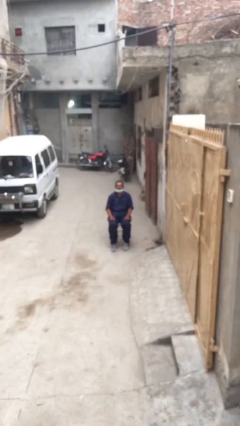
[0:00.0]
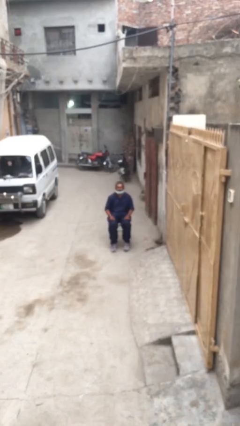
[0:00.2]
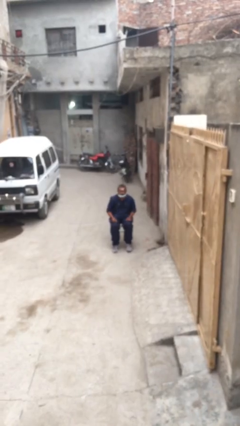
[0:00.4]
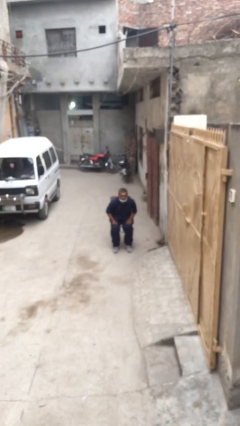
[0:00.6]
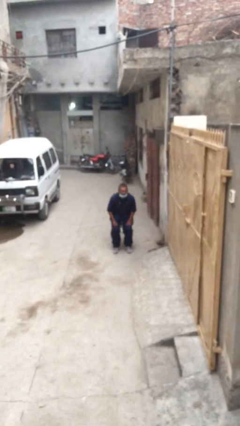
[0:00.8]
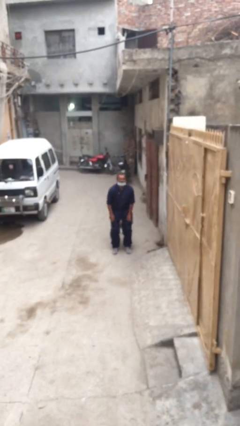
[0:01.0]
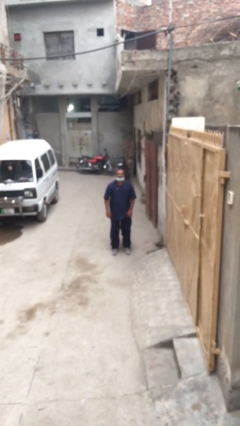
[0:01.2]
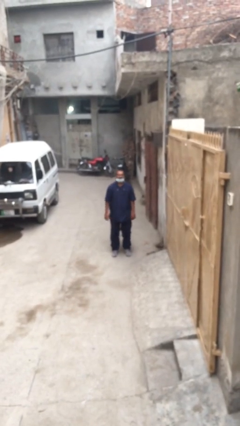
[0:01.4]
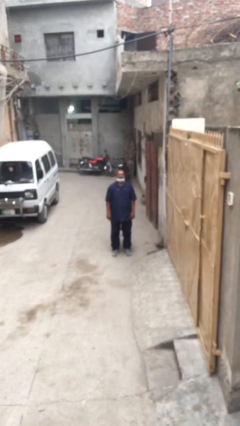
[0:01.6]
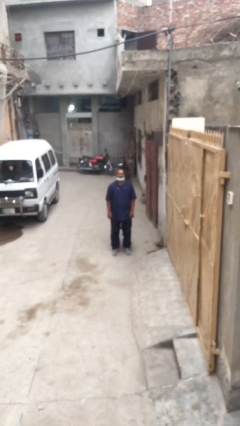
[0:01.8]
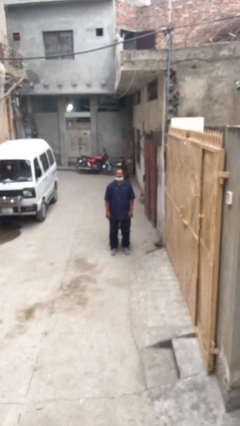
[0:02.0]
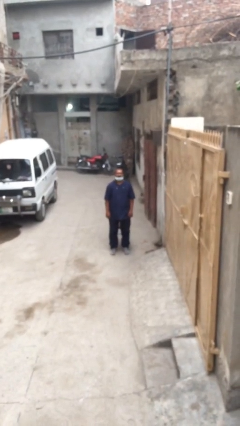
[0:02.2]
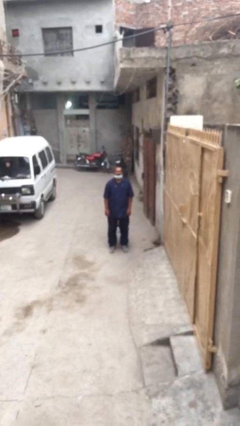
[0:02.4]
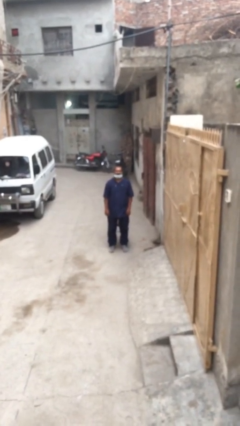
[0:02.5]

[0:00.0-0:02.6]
person stands up

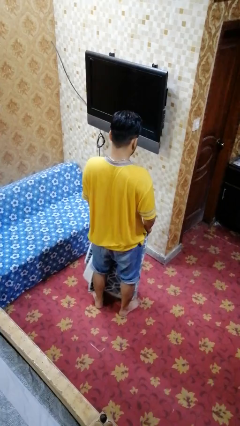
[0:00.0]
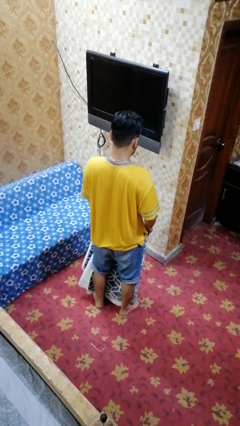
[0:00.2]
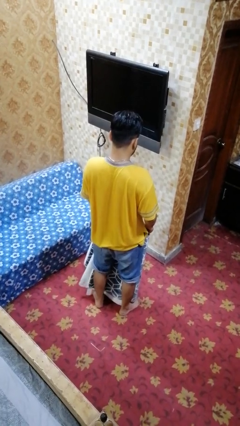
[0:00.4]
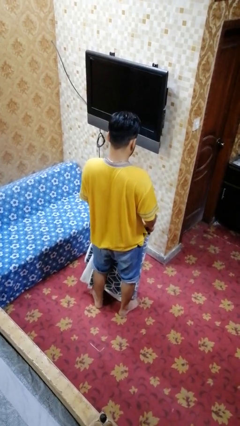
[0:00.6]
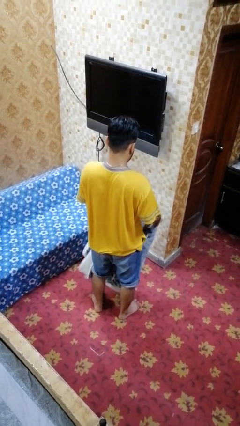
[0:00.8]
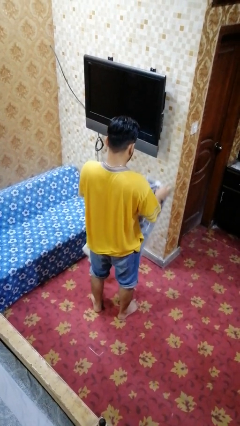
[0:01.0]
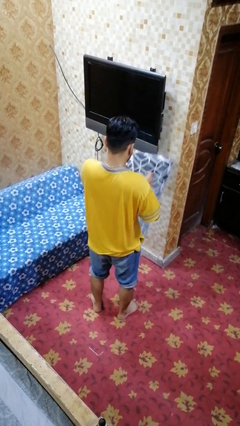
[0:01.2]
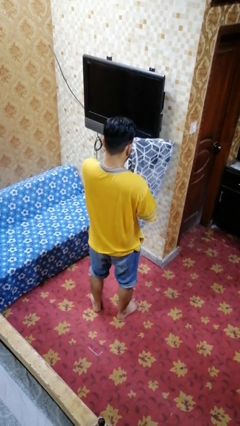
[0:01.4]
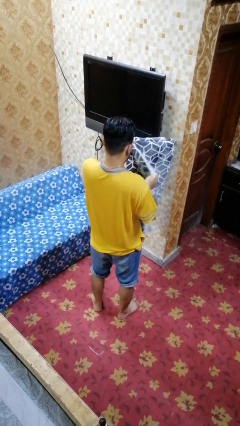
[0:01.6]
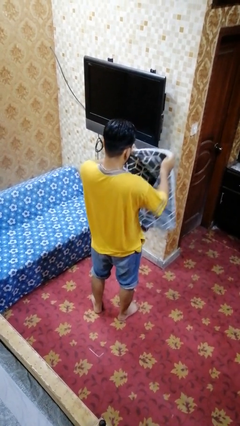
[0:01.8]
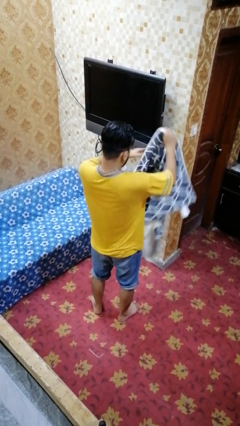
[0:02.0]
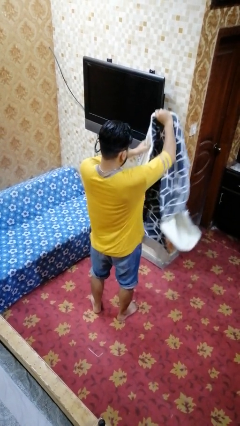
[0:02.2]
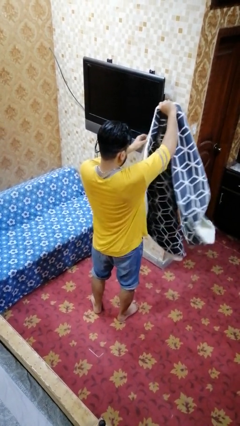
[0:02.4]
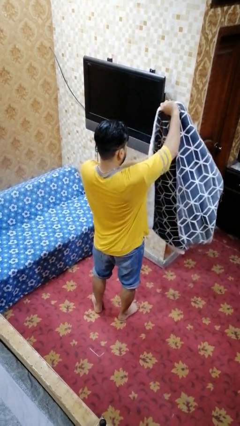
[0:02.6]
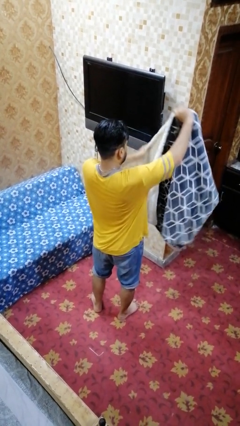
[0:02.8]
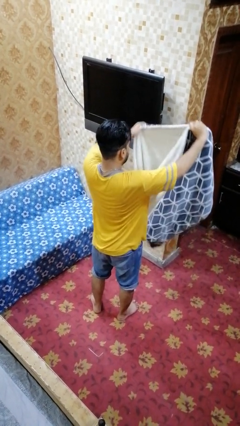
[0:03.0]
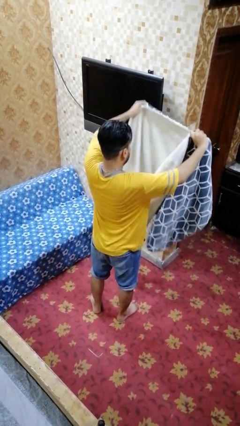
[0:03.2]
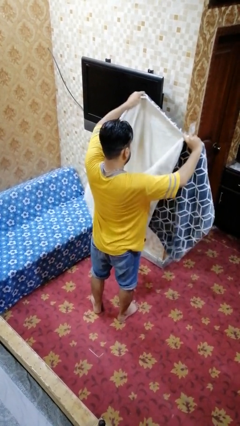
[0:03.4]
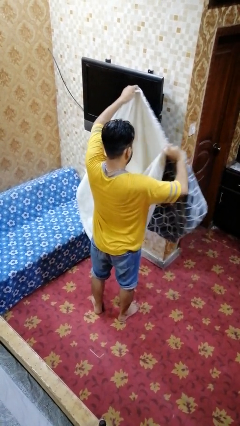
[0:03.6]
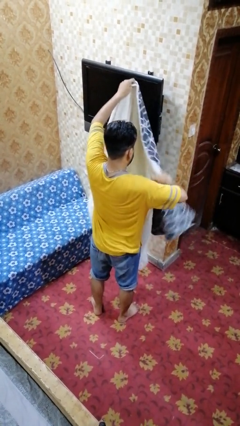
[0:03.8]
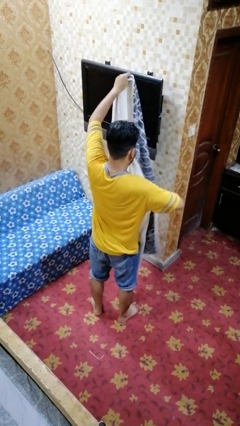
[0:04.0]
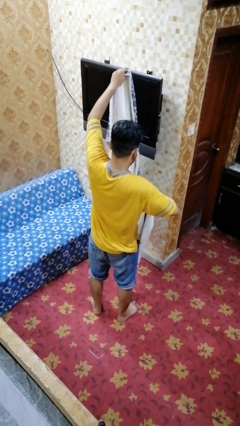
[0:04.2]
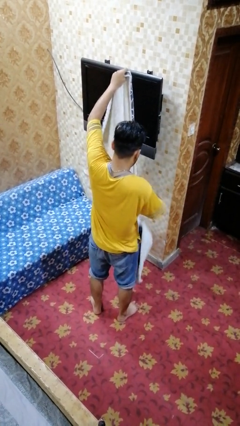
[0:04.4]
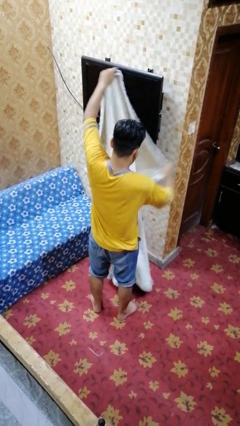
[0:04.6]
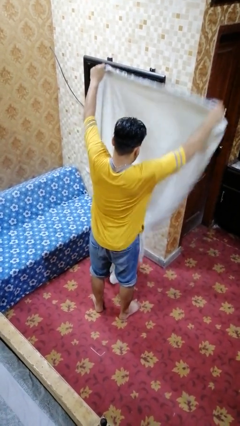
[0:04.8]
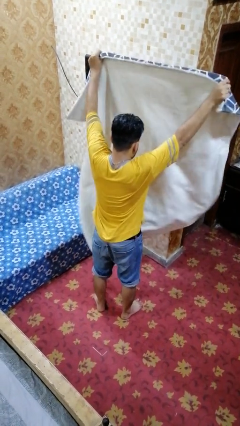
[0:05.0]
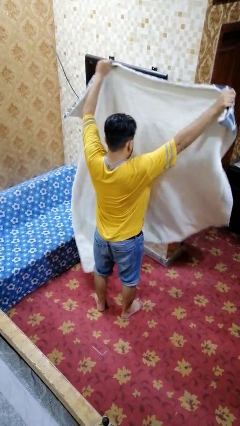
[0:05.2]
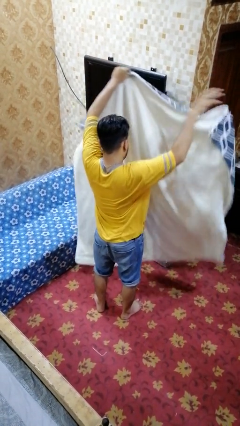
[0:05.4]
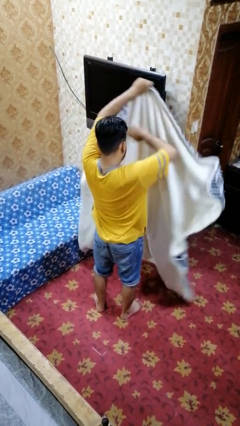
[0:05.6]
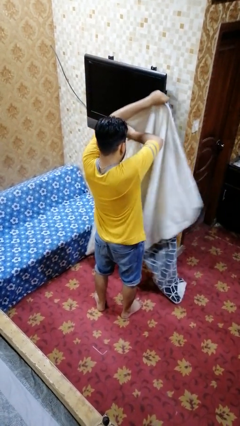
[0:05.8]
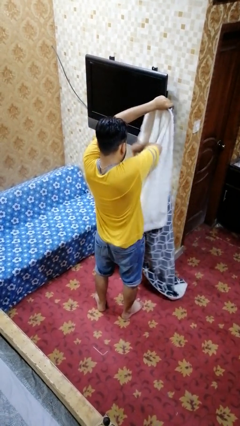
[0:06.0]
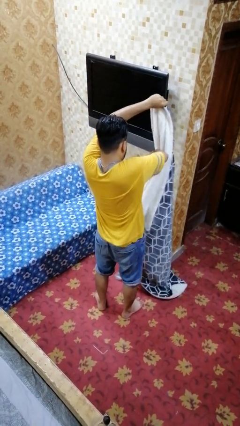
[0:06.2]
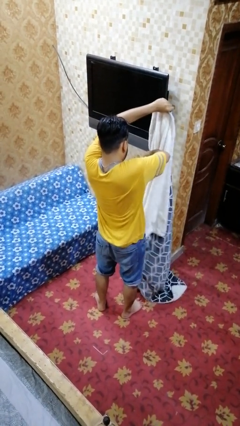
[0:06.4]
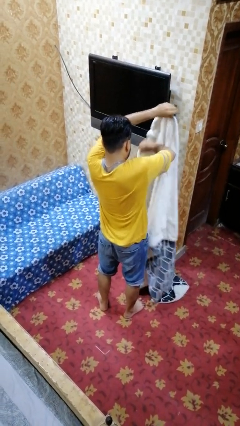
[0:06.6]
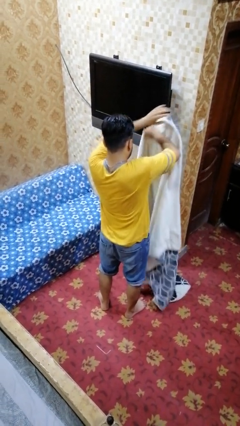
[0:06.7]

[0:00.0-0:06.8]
person unfolds blanket

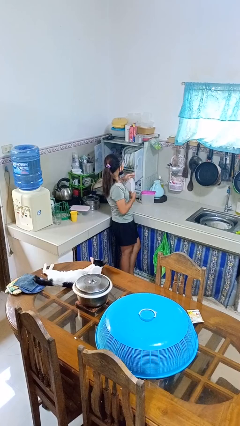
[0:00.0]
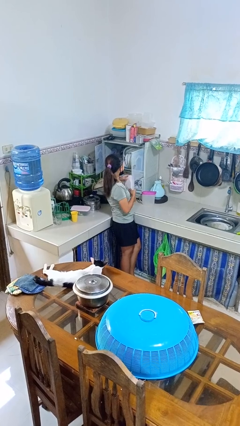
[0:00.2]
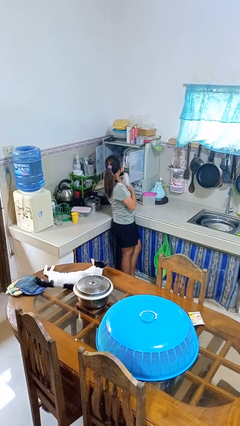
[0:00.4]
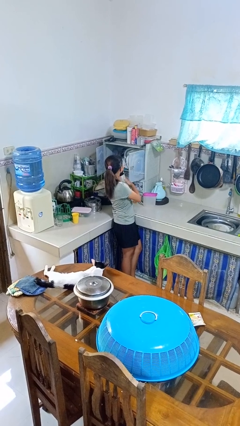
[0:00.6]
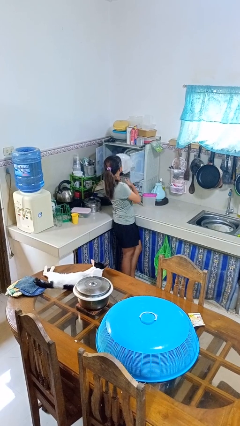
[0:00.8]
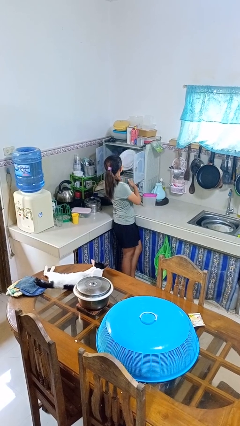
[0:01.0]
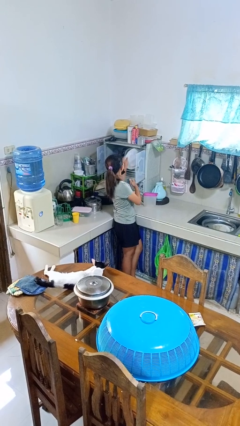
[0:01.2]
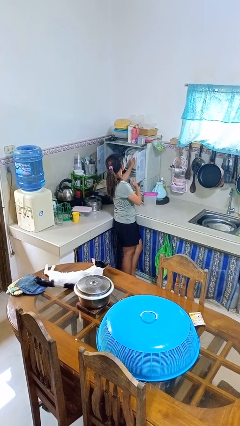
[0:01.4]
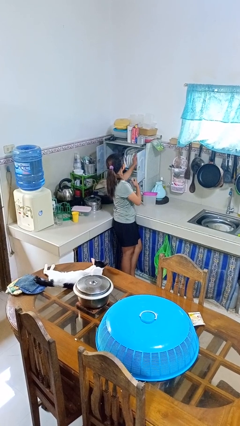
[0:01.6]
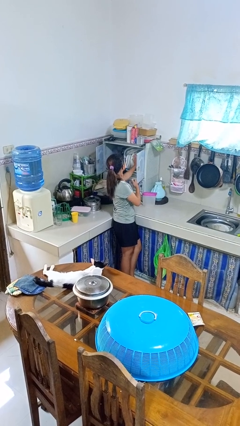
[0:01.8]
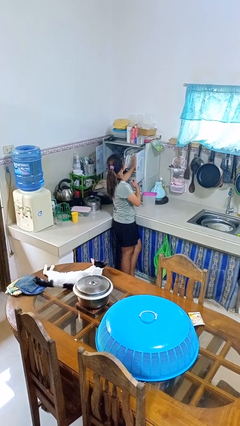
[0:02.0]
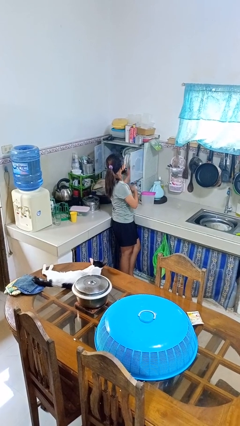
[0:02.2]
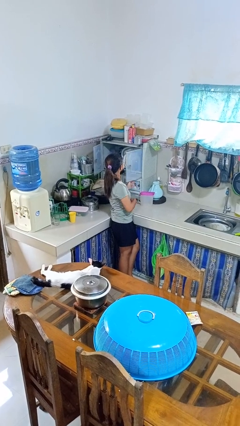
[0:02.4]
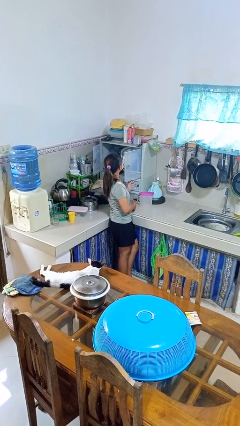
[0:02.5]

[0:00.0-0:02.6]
person puts object into kitchen drawer

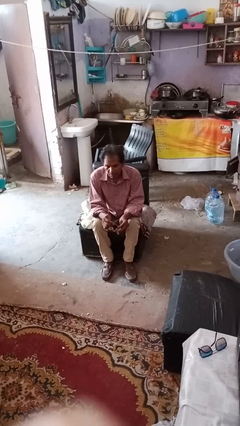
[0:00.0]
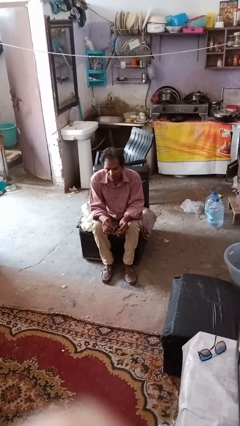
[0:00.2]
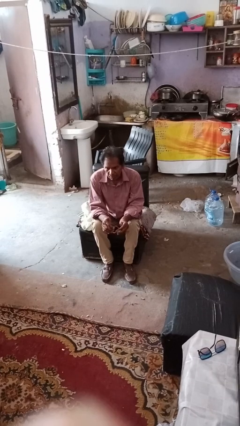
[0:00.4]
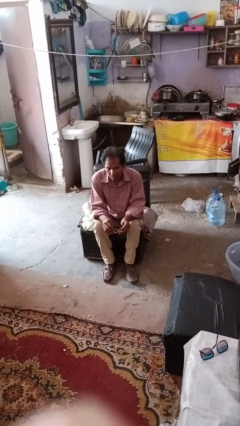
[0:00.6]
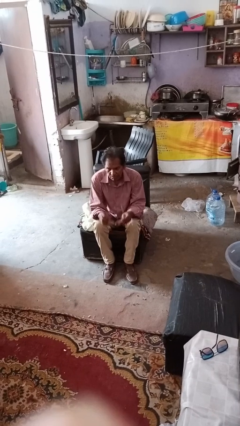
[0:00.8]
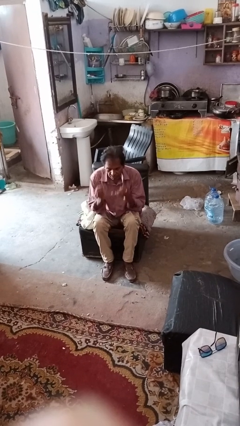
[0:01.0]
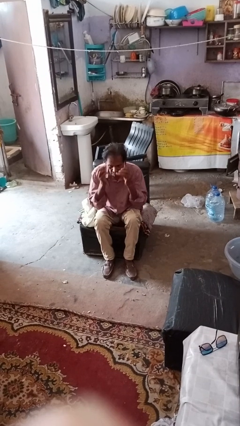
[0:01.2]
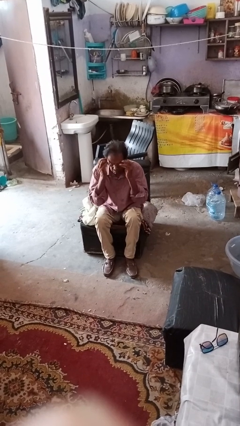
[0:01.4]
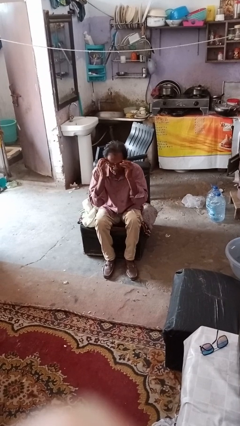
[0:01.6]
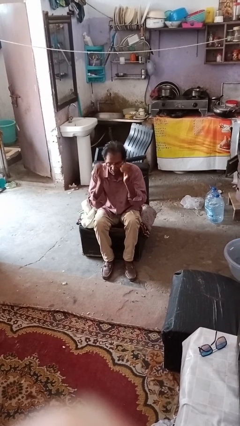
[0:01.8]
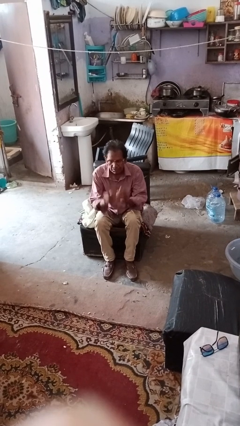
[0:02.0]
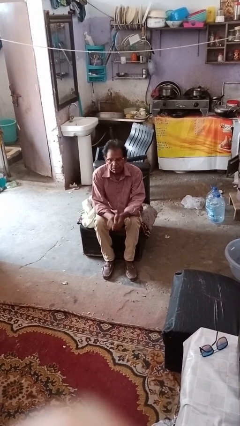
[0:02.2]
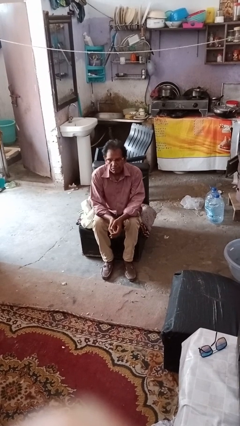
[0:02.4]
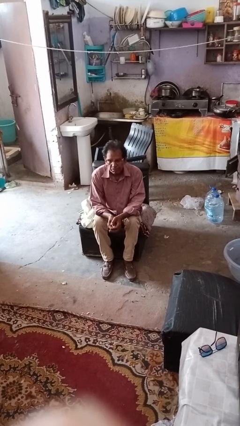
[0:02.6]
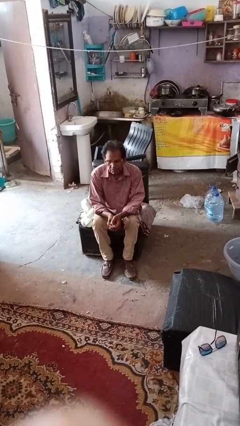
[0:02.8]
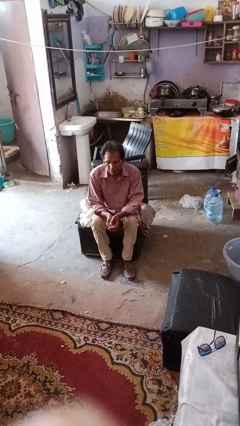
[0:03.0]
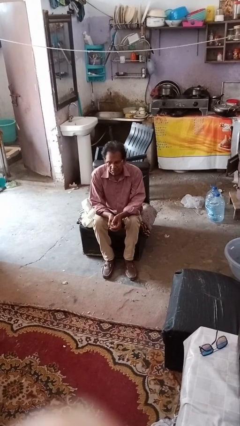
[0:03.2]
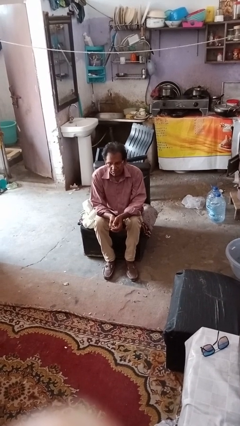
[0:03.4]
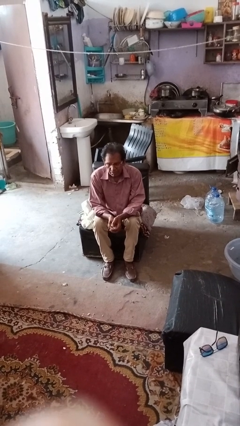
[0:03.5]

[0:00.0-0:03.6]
person puts on glasses

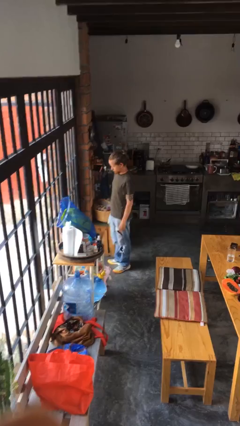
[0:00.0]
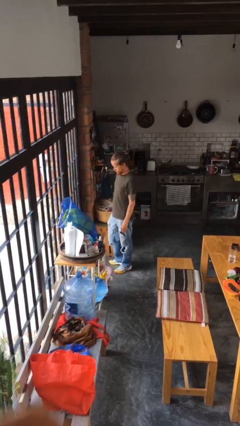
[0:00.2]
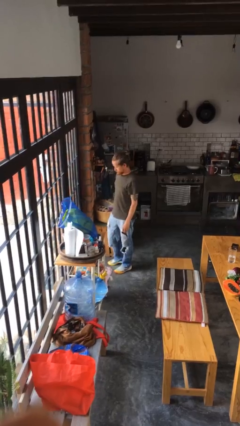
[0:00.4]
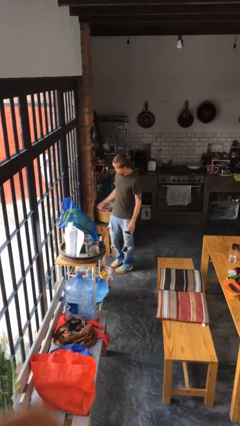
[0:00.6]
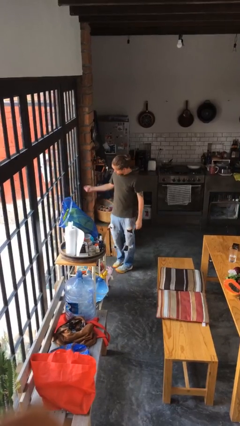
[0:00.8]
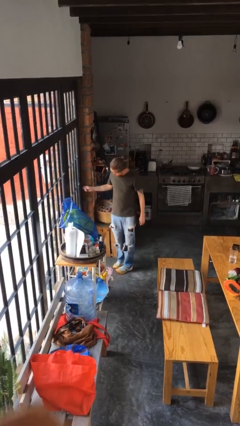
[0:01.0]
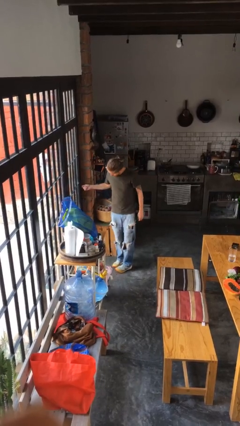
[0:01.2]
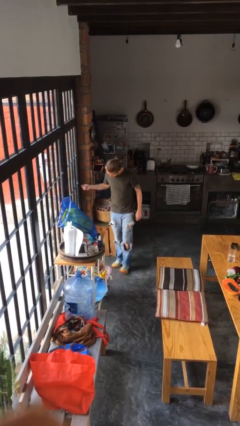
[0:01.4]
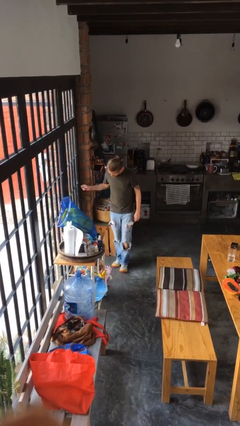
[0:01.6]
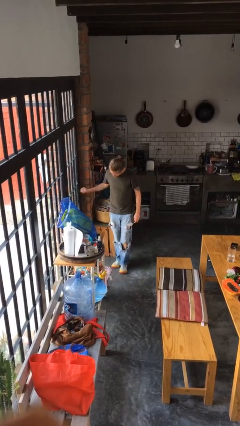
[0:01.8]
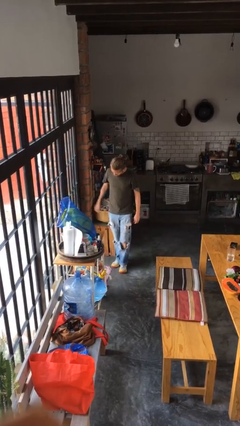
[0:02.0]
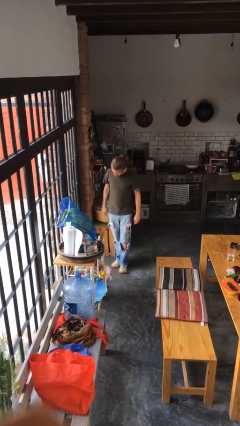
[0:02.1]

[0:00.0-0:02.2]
person unlocks door with keys
